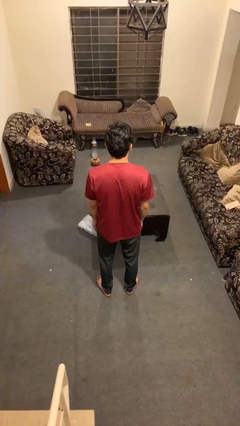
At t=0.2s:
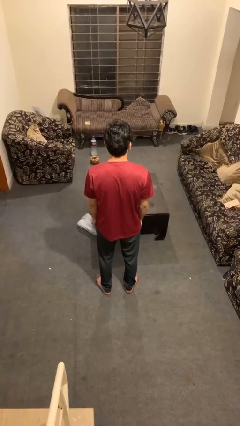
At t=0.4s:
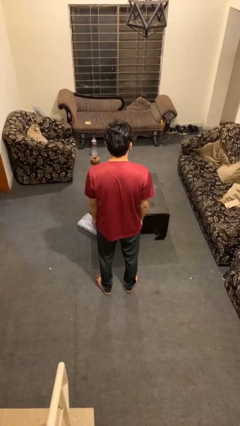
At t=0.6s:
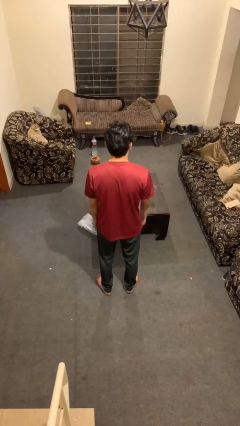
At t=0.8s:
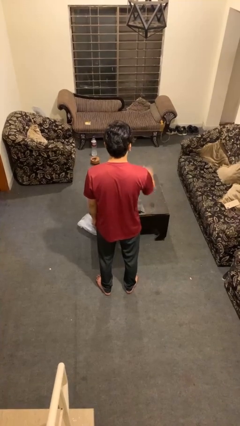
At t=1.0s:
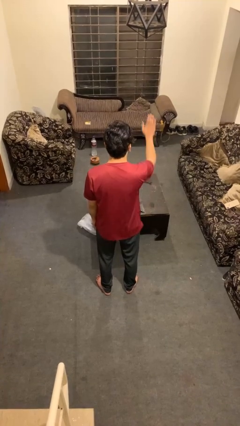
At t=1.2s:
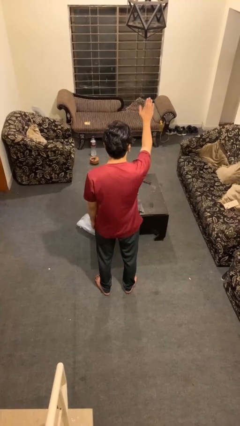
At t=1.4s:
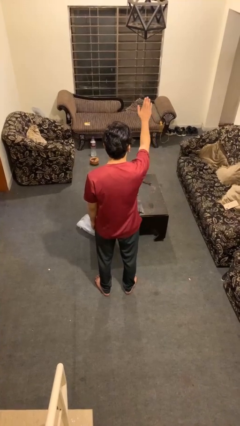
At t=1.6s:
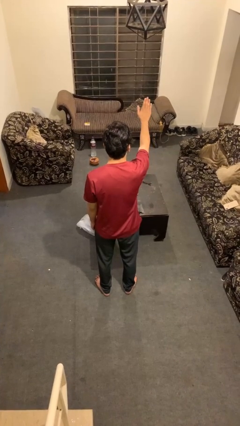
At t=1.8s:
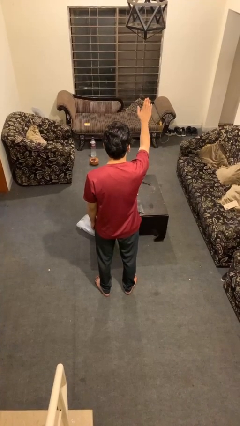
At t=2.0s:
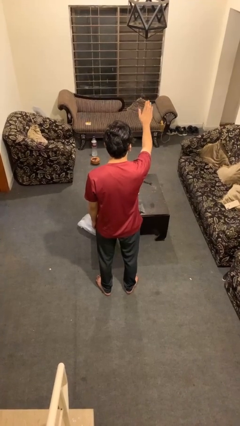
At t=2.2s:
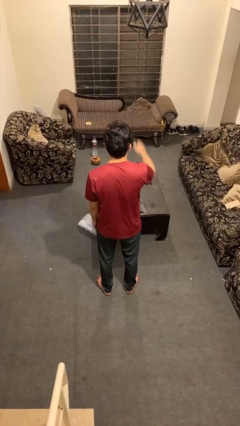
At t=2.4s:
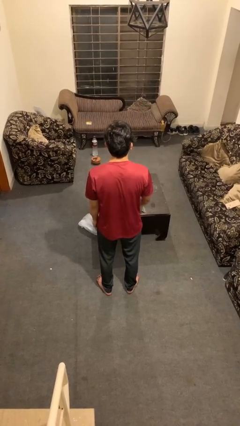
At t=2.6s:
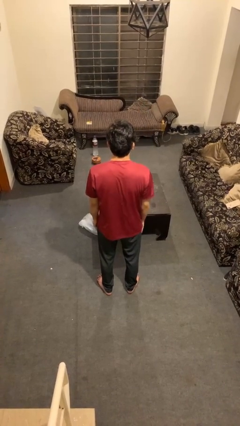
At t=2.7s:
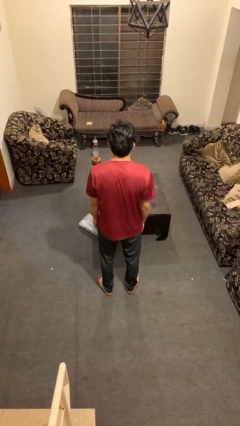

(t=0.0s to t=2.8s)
person gestures stop

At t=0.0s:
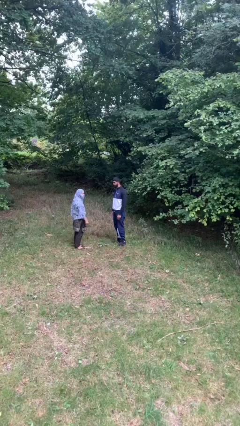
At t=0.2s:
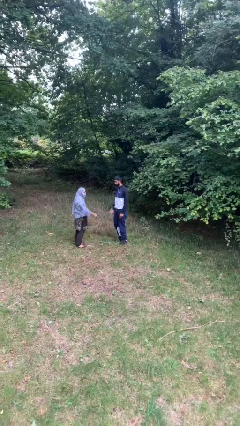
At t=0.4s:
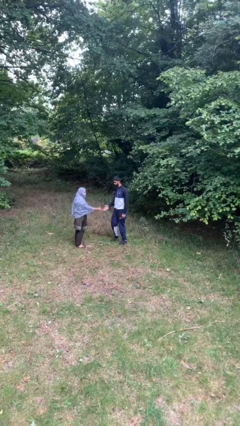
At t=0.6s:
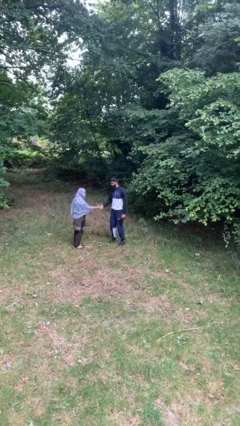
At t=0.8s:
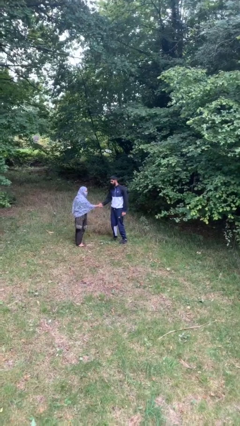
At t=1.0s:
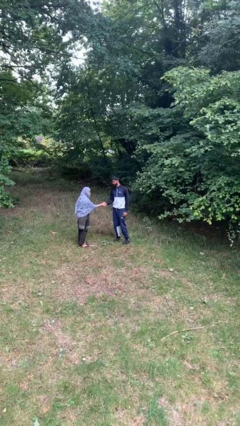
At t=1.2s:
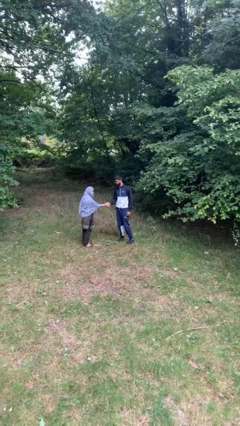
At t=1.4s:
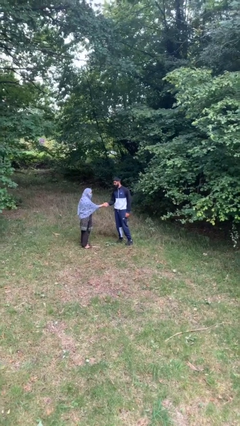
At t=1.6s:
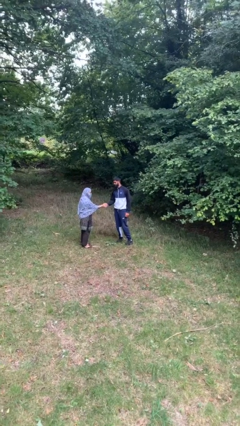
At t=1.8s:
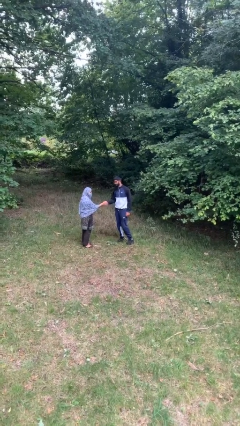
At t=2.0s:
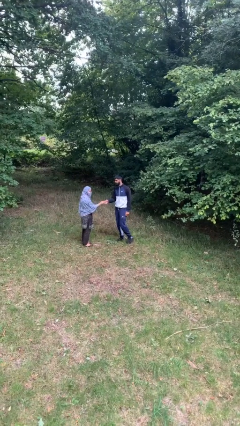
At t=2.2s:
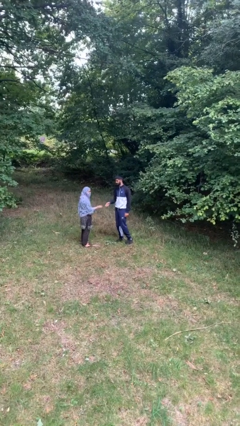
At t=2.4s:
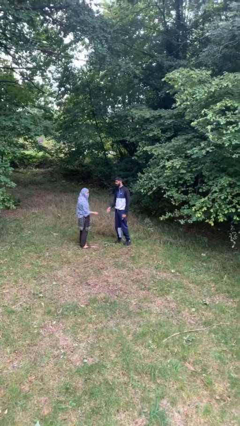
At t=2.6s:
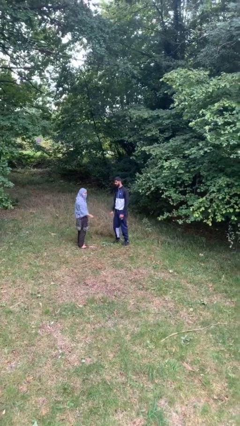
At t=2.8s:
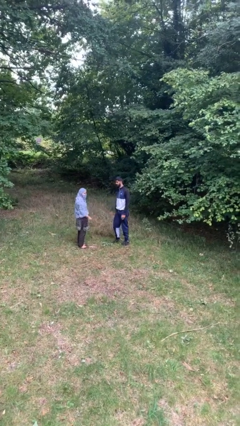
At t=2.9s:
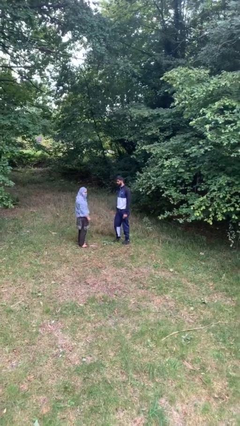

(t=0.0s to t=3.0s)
person shakes hand

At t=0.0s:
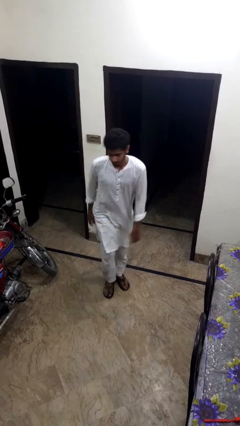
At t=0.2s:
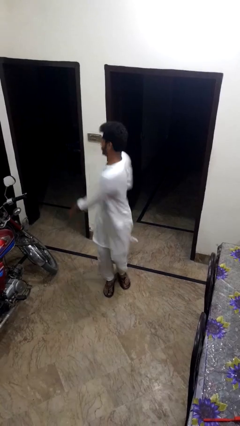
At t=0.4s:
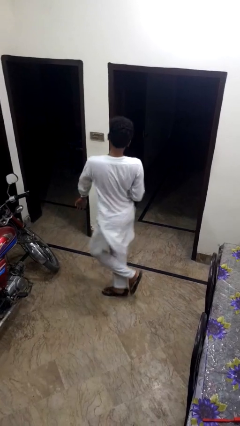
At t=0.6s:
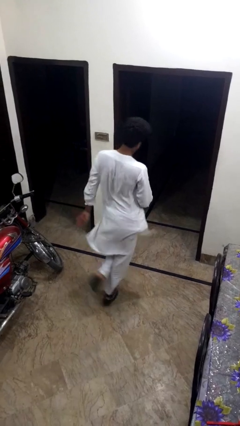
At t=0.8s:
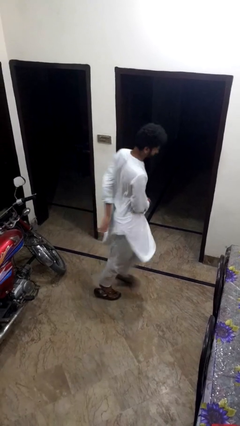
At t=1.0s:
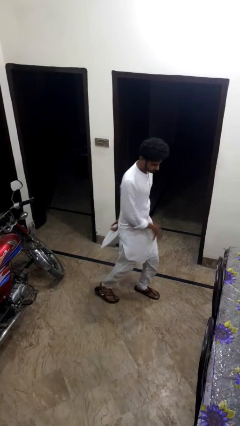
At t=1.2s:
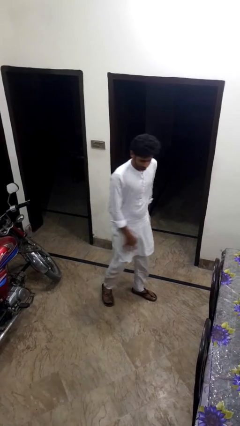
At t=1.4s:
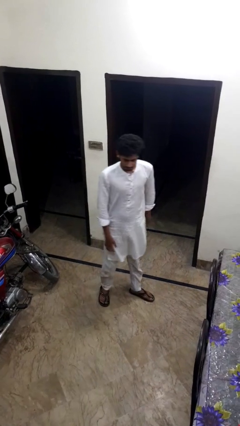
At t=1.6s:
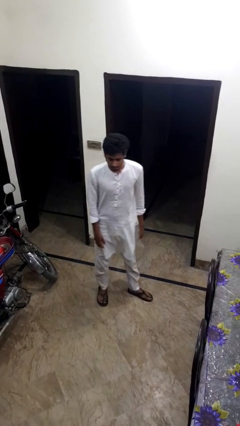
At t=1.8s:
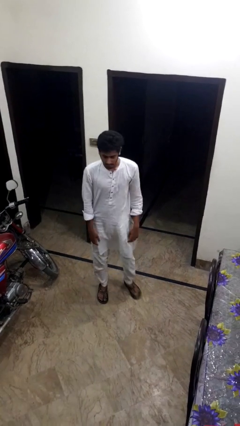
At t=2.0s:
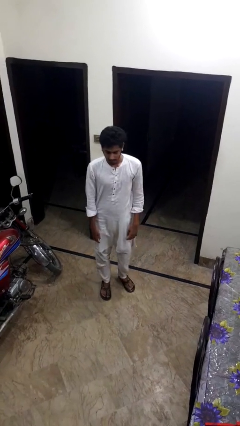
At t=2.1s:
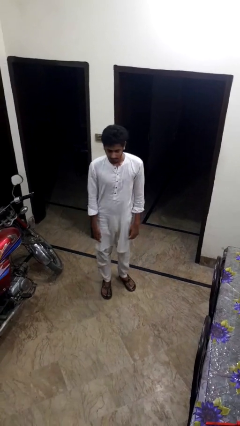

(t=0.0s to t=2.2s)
person twirls

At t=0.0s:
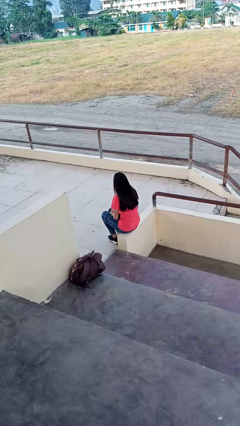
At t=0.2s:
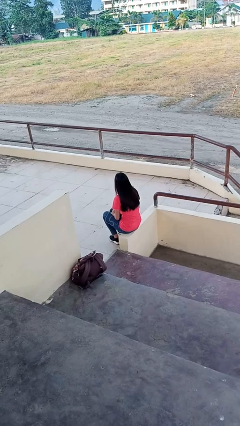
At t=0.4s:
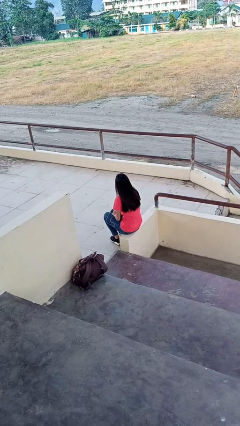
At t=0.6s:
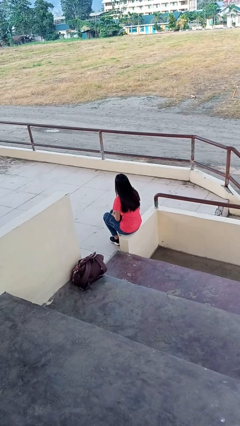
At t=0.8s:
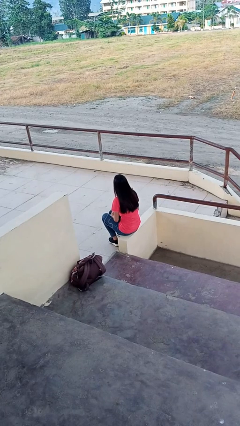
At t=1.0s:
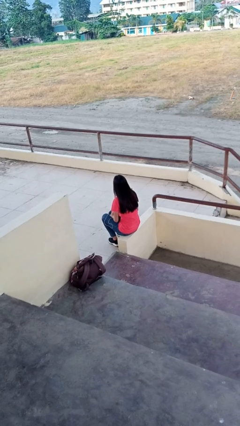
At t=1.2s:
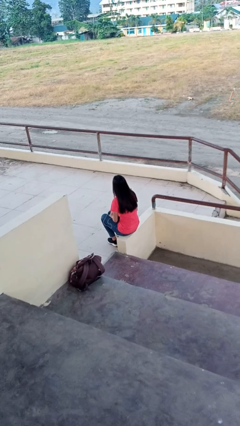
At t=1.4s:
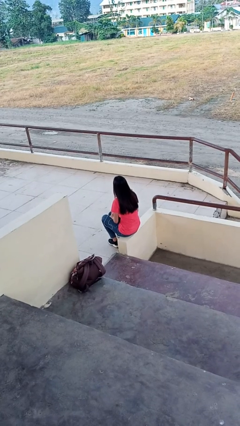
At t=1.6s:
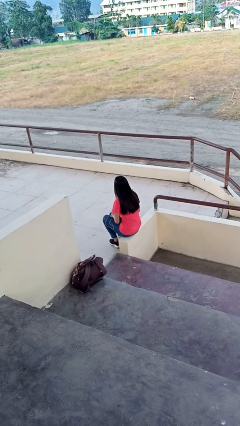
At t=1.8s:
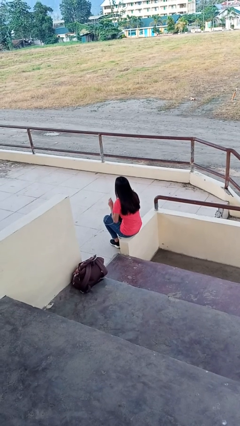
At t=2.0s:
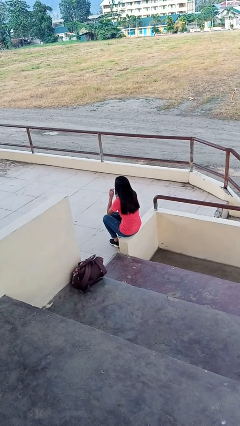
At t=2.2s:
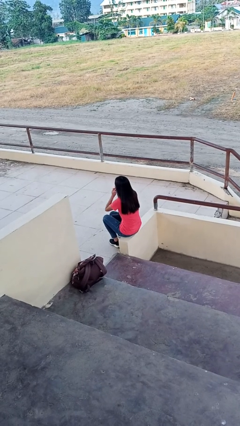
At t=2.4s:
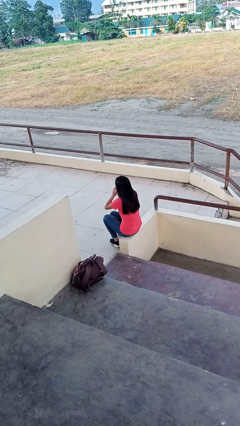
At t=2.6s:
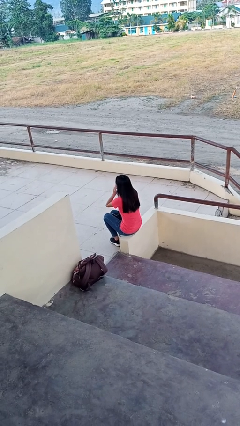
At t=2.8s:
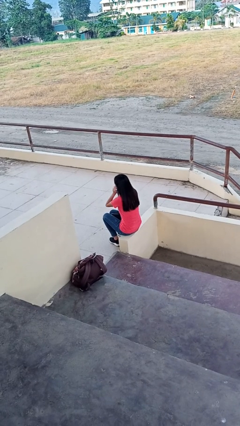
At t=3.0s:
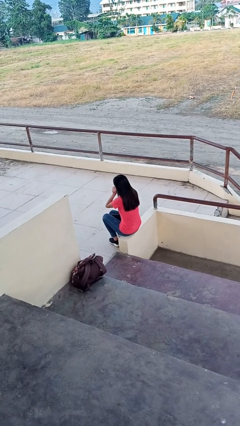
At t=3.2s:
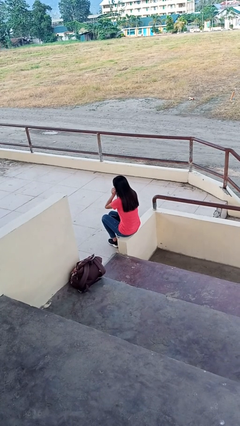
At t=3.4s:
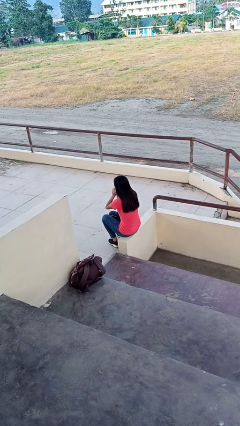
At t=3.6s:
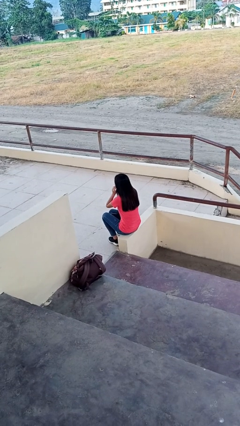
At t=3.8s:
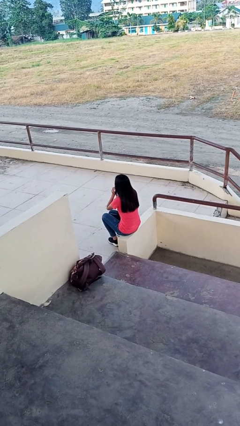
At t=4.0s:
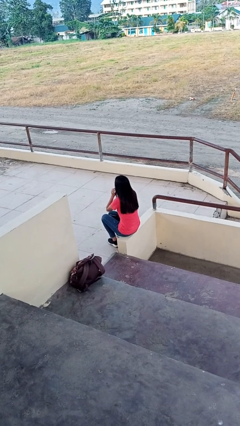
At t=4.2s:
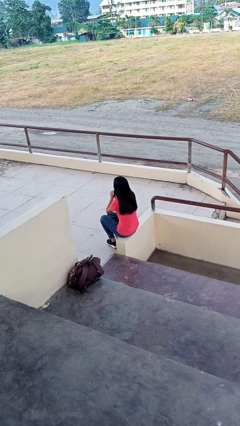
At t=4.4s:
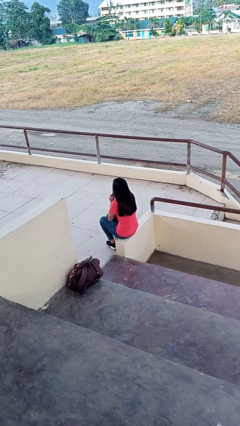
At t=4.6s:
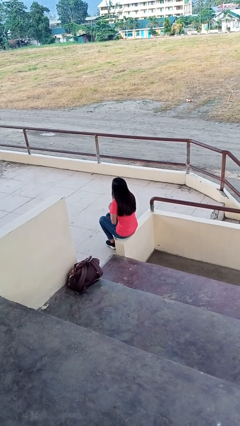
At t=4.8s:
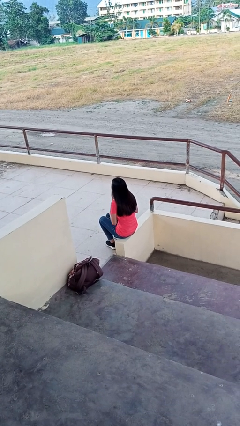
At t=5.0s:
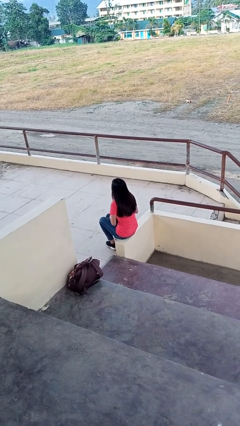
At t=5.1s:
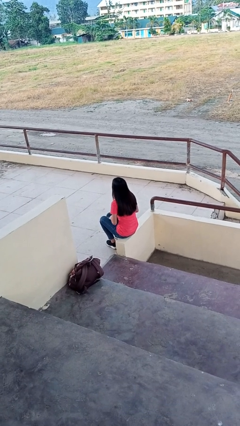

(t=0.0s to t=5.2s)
person puts on headphones

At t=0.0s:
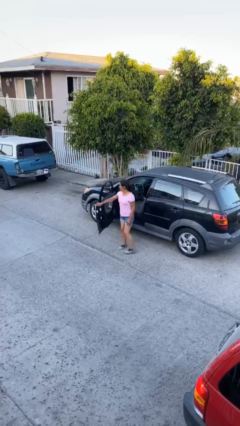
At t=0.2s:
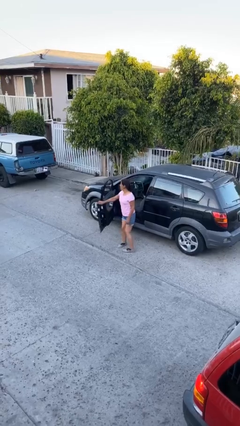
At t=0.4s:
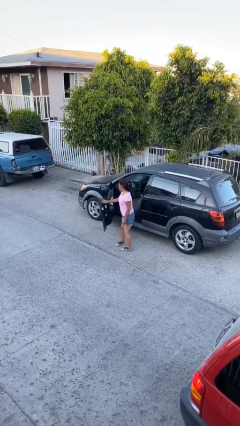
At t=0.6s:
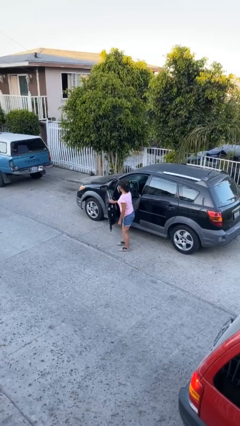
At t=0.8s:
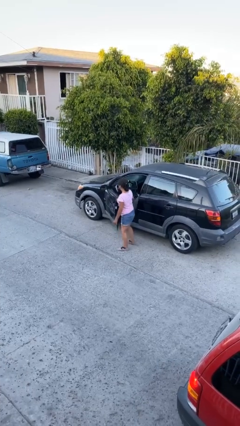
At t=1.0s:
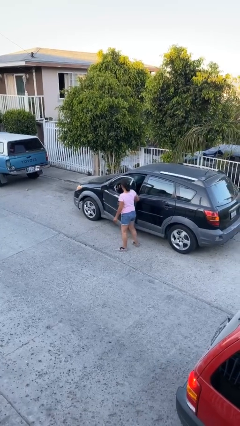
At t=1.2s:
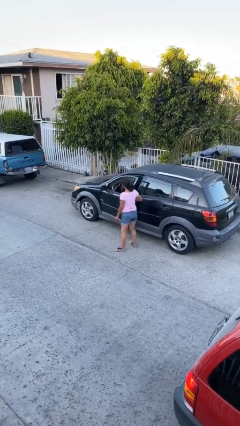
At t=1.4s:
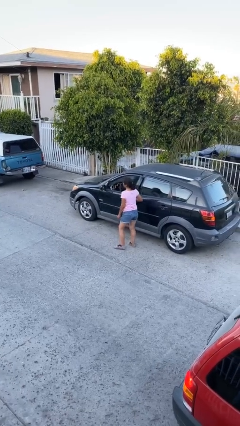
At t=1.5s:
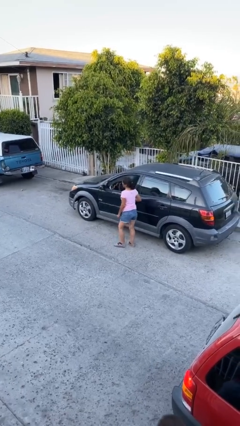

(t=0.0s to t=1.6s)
person closes car door

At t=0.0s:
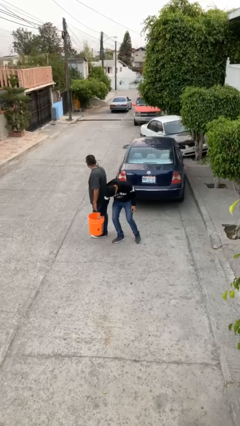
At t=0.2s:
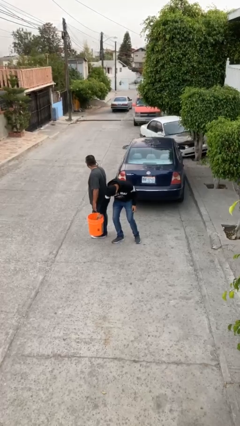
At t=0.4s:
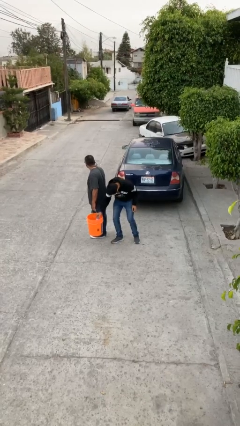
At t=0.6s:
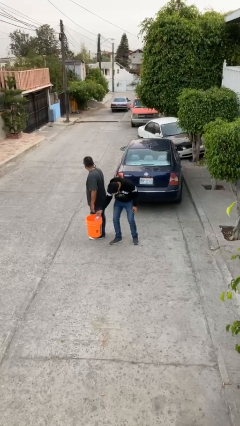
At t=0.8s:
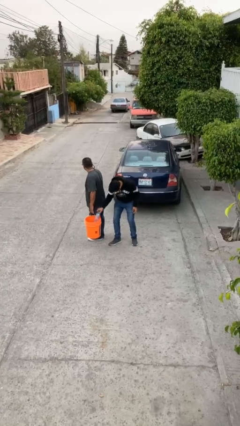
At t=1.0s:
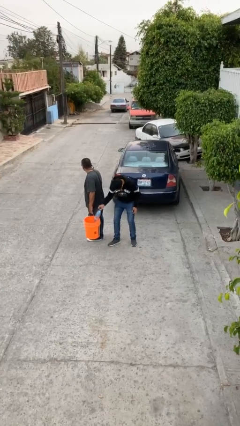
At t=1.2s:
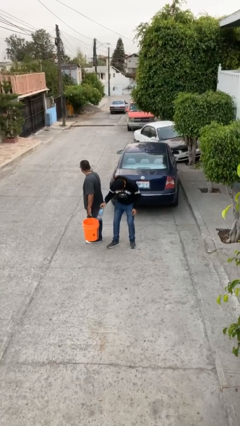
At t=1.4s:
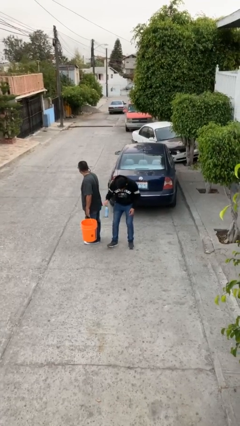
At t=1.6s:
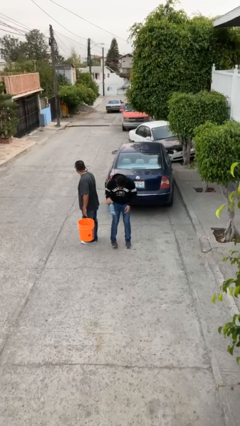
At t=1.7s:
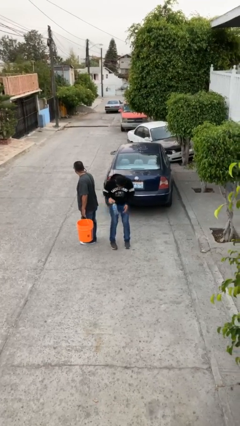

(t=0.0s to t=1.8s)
person steals object from person

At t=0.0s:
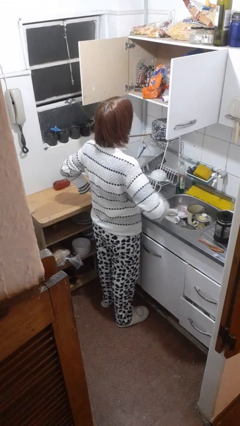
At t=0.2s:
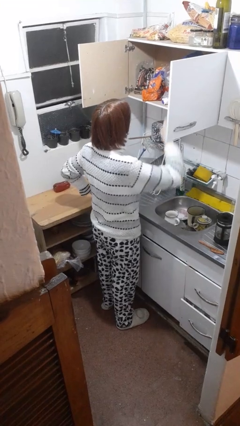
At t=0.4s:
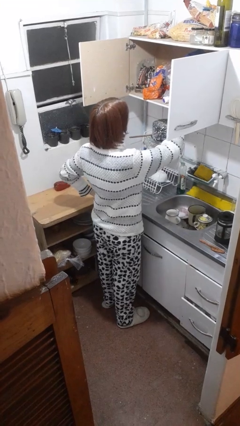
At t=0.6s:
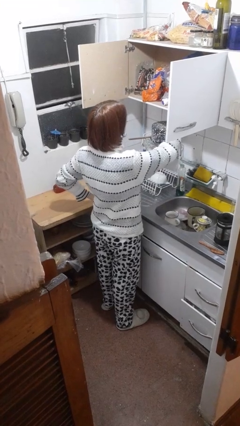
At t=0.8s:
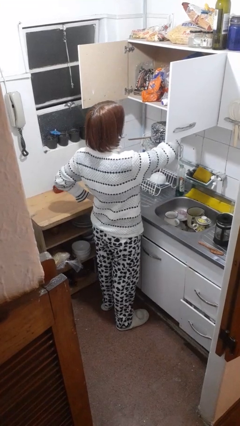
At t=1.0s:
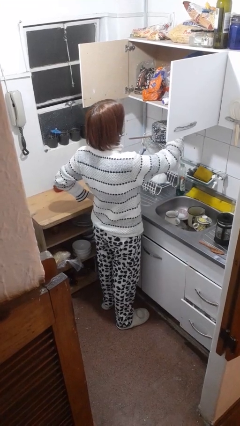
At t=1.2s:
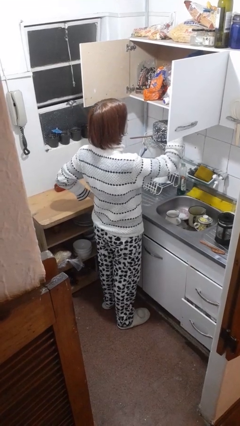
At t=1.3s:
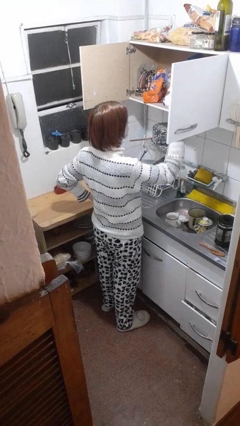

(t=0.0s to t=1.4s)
person takes object from cabinet
